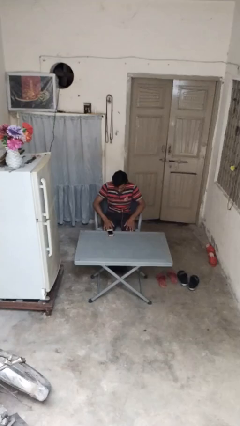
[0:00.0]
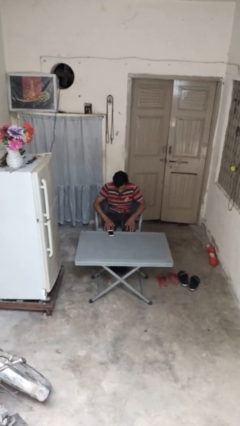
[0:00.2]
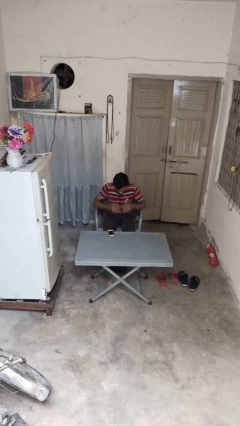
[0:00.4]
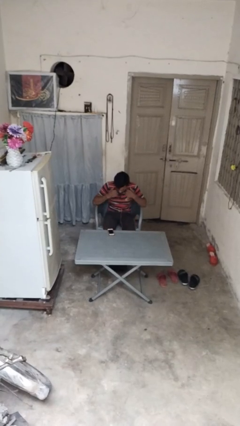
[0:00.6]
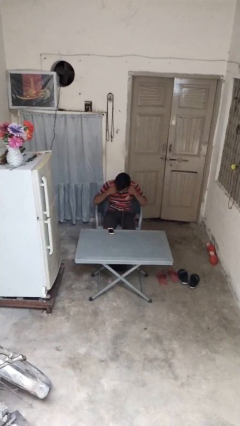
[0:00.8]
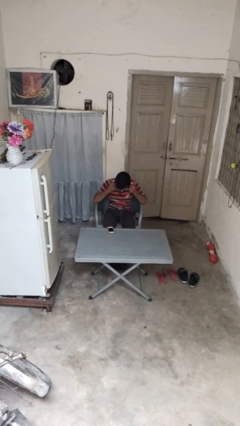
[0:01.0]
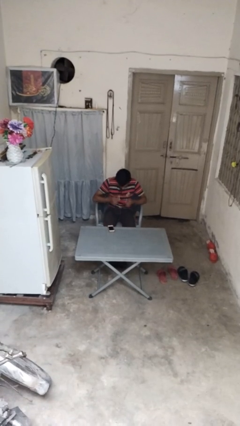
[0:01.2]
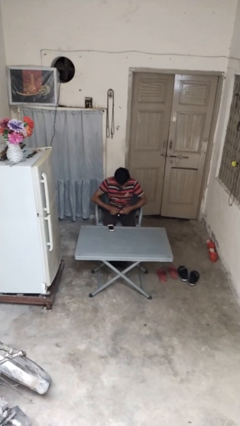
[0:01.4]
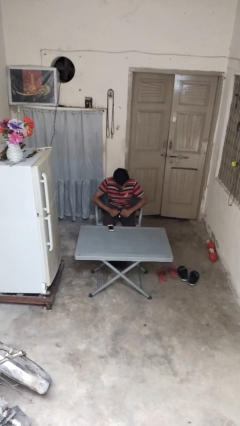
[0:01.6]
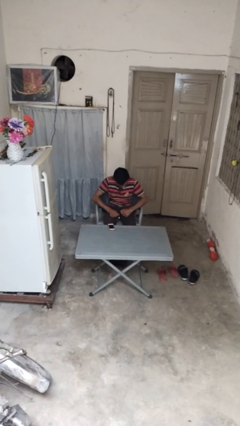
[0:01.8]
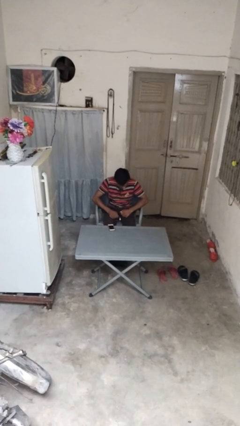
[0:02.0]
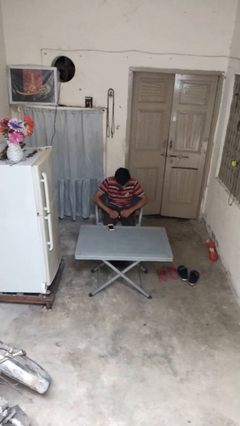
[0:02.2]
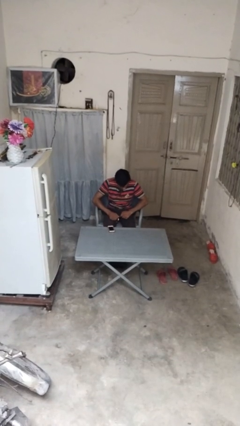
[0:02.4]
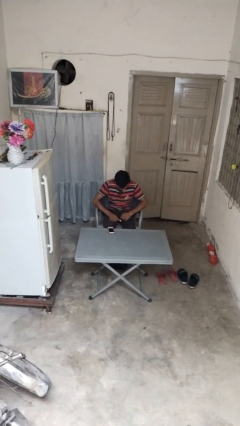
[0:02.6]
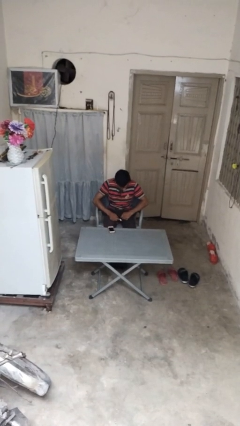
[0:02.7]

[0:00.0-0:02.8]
person takes off headphones

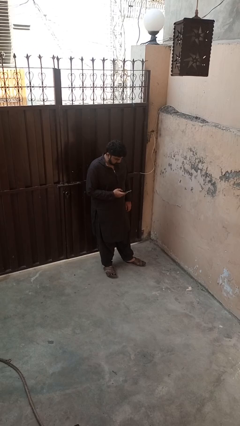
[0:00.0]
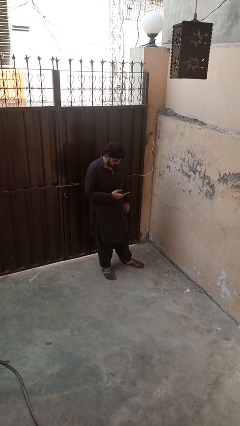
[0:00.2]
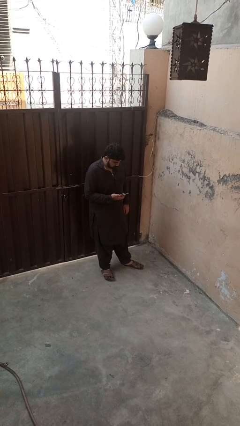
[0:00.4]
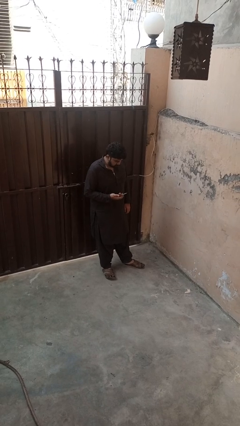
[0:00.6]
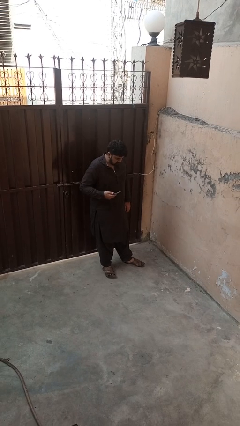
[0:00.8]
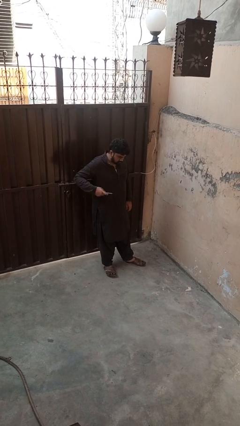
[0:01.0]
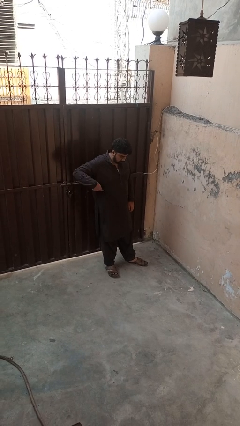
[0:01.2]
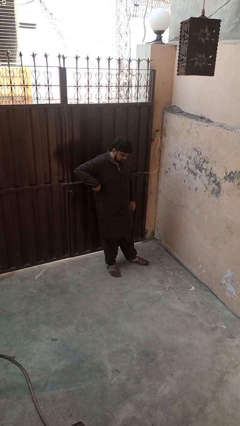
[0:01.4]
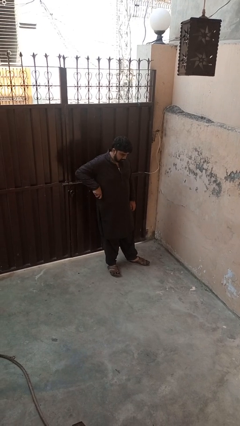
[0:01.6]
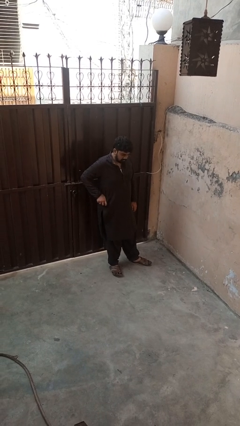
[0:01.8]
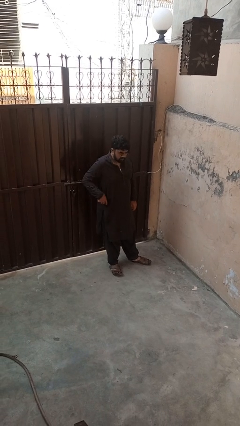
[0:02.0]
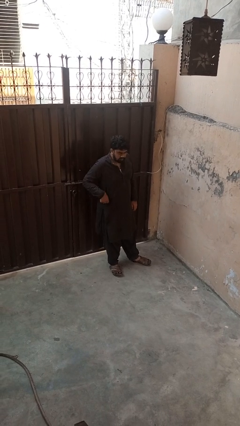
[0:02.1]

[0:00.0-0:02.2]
person puts phone into pocket

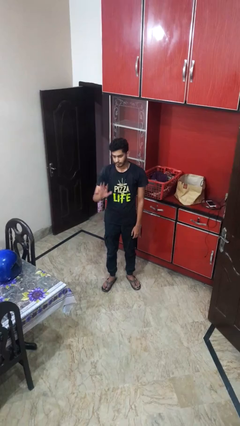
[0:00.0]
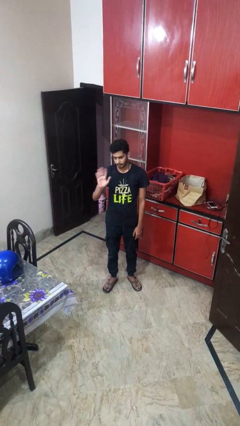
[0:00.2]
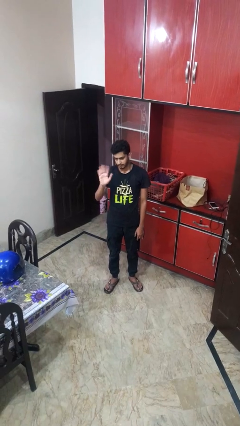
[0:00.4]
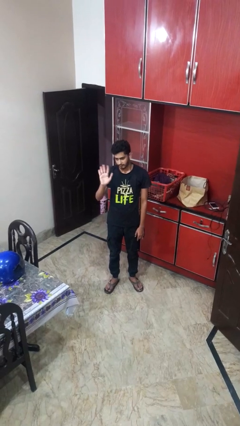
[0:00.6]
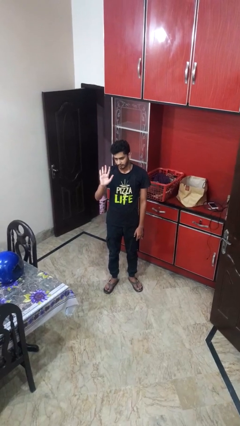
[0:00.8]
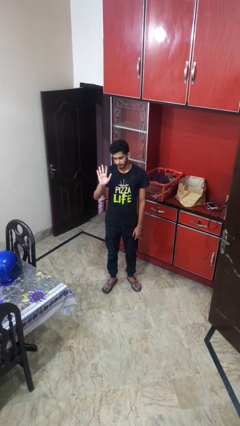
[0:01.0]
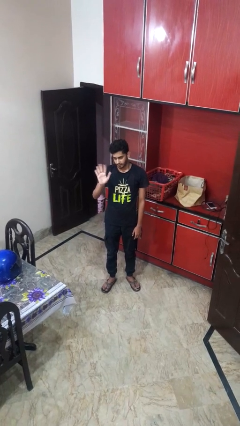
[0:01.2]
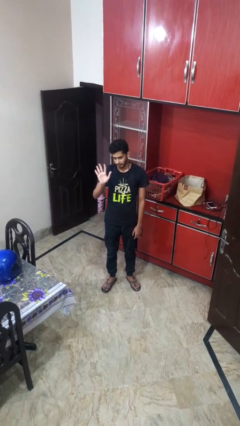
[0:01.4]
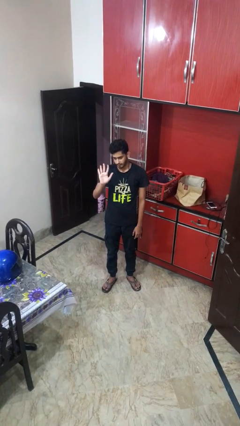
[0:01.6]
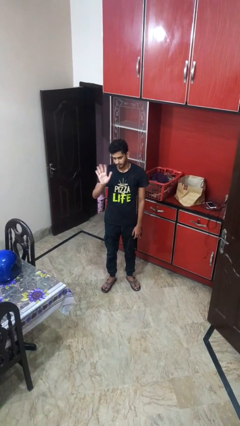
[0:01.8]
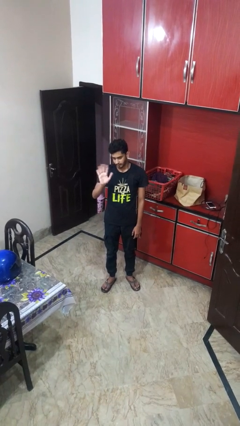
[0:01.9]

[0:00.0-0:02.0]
person waves at person

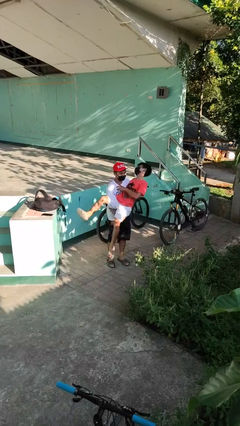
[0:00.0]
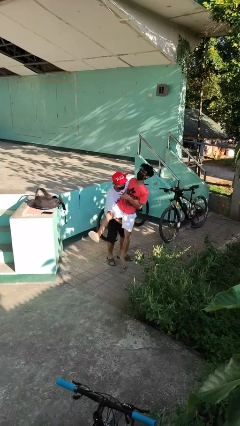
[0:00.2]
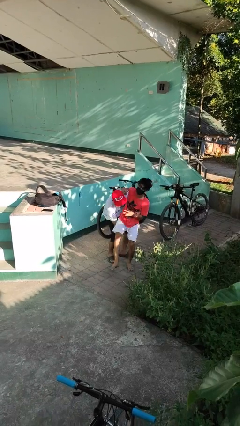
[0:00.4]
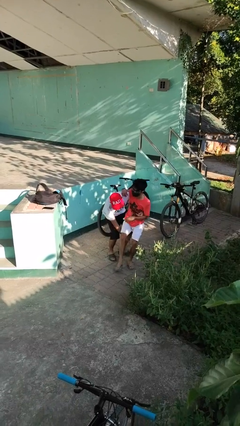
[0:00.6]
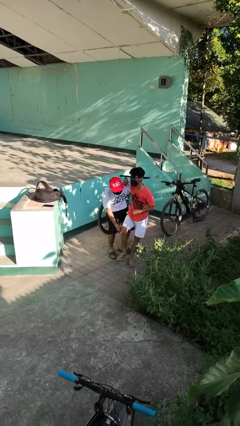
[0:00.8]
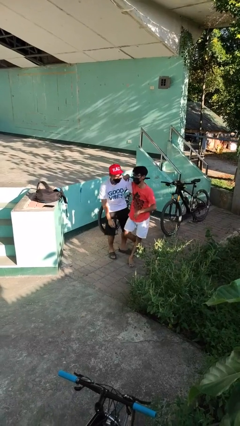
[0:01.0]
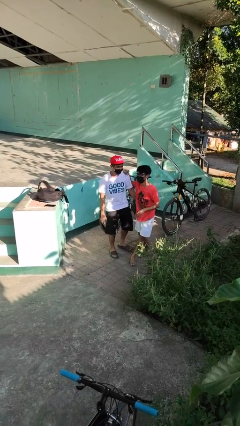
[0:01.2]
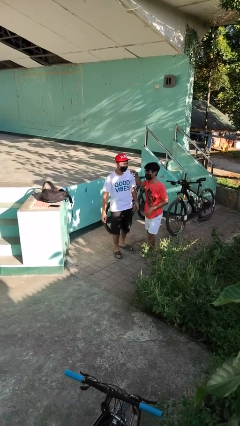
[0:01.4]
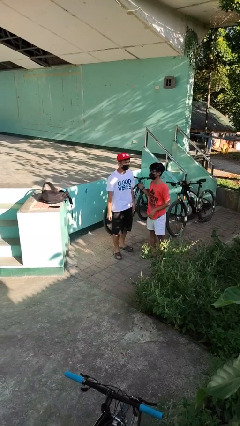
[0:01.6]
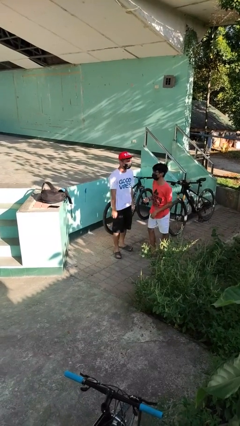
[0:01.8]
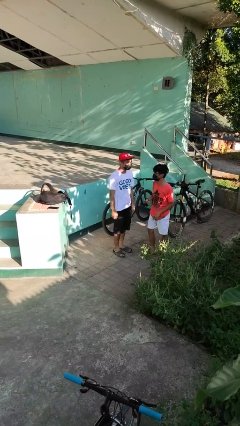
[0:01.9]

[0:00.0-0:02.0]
person puts down person

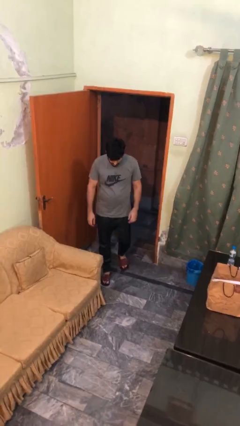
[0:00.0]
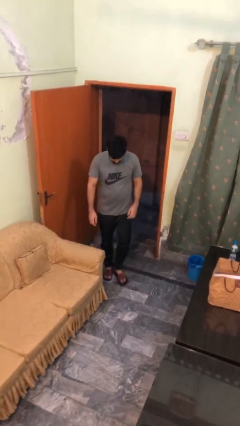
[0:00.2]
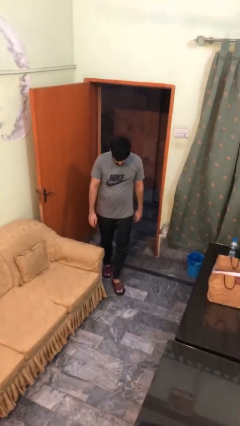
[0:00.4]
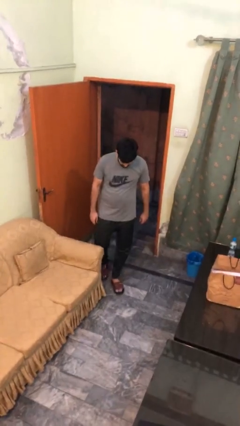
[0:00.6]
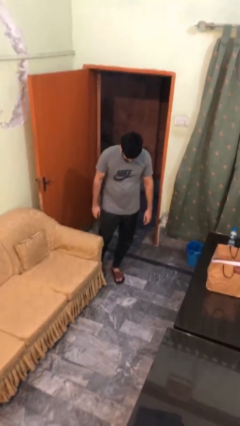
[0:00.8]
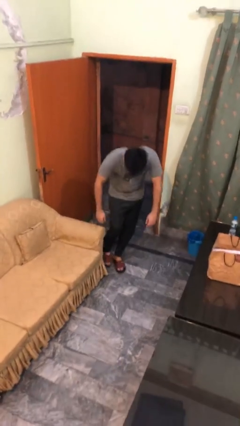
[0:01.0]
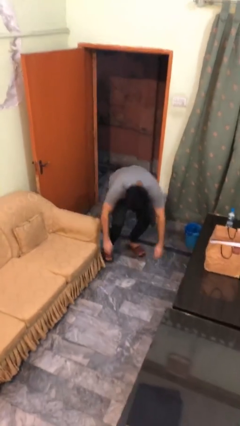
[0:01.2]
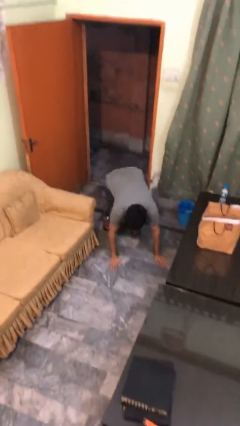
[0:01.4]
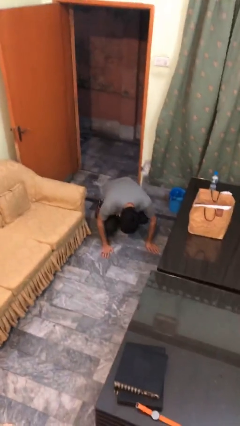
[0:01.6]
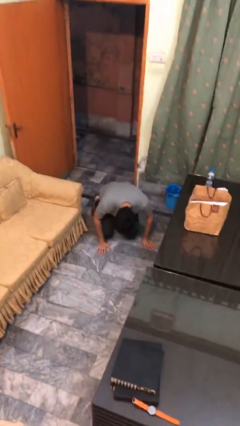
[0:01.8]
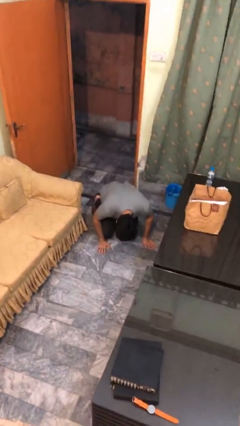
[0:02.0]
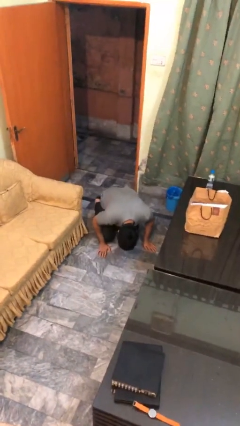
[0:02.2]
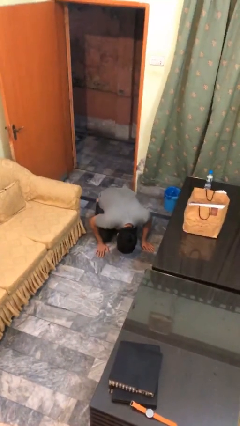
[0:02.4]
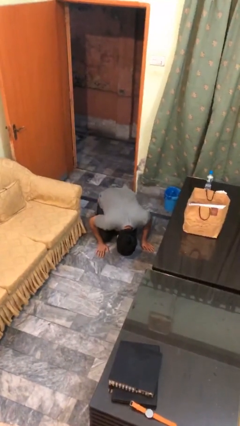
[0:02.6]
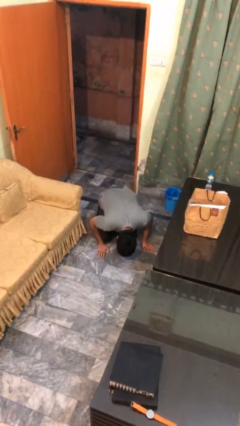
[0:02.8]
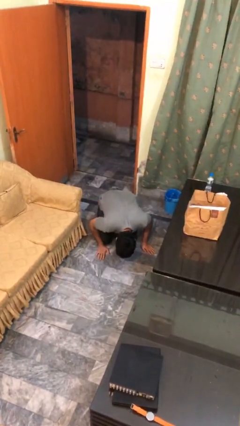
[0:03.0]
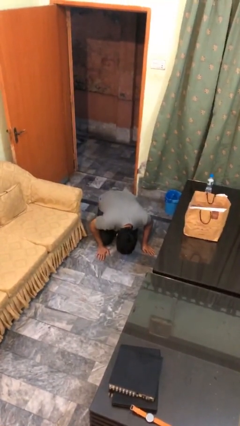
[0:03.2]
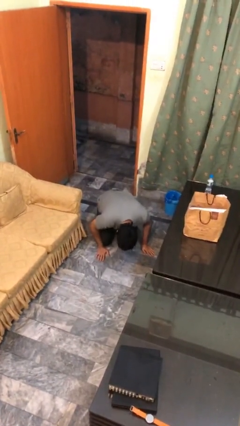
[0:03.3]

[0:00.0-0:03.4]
person trips on object on floor

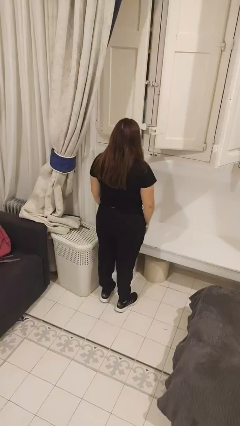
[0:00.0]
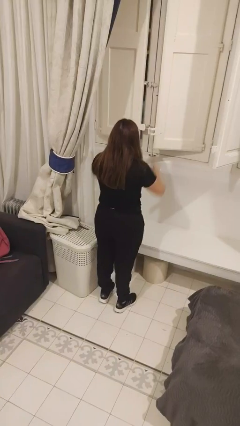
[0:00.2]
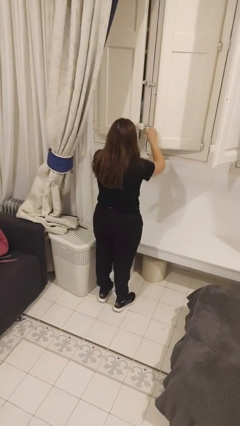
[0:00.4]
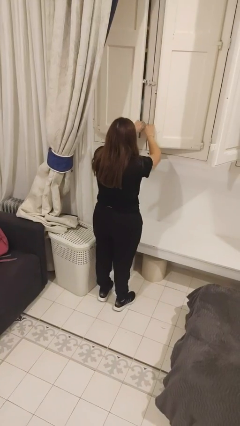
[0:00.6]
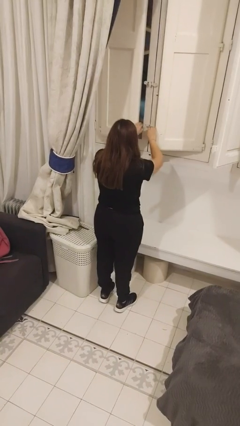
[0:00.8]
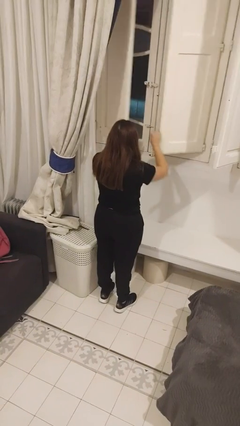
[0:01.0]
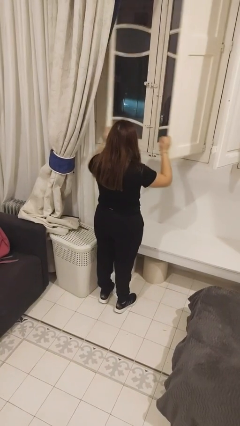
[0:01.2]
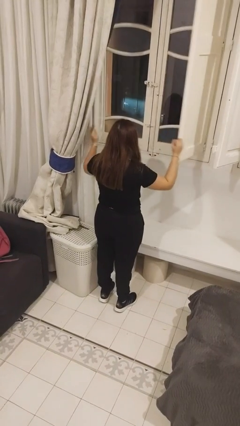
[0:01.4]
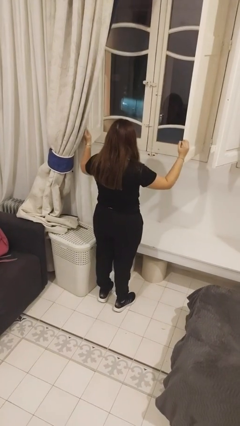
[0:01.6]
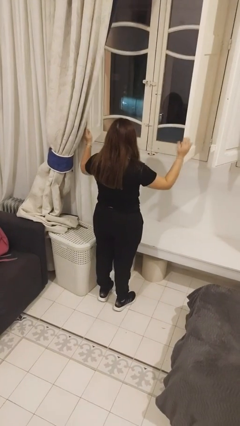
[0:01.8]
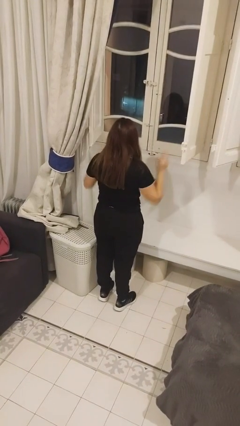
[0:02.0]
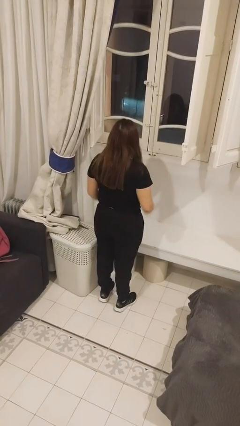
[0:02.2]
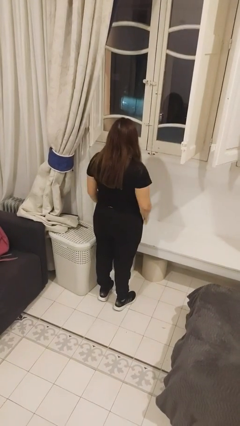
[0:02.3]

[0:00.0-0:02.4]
person opens home window

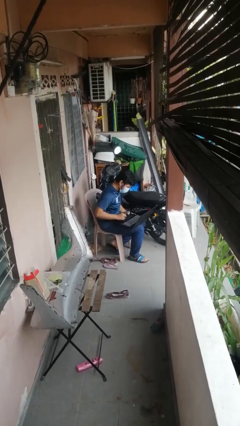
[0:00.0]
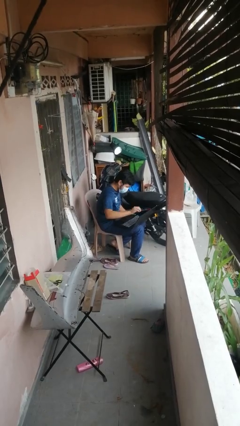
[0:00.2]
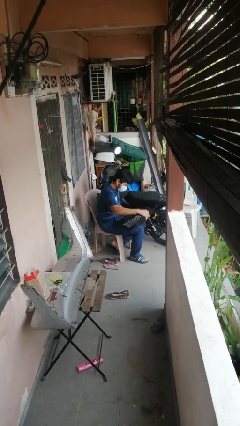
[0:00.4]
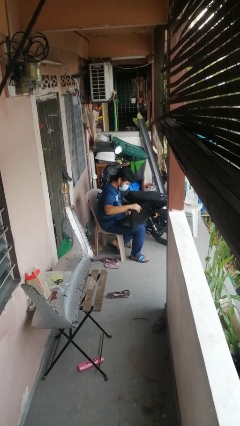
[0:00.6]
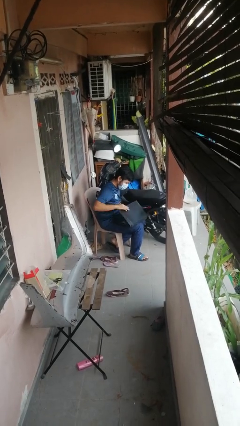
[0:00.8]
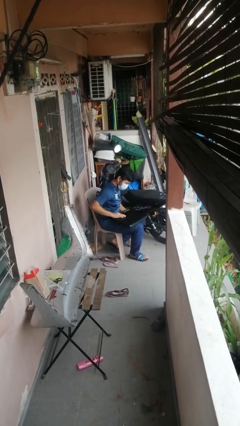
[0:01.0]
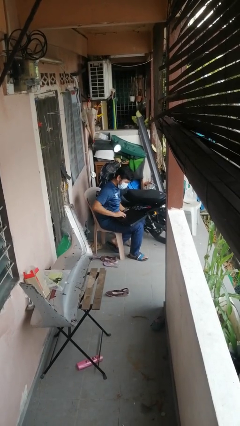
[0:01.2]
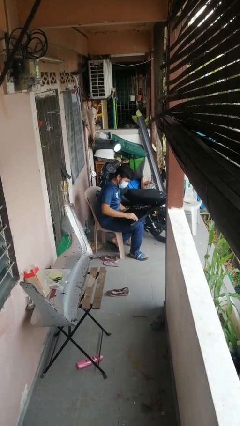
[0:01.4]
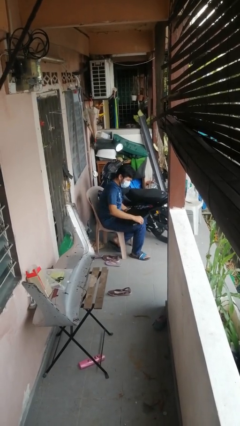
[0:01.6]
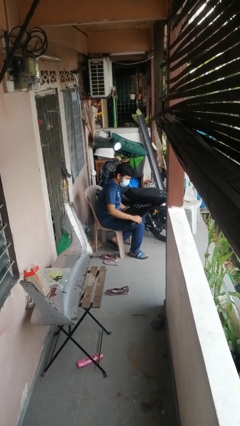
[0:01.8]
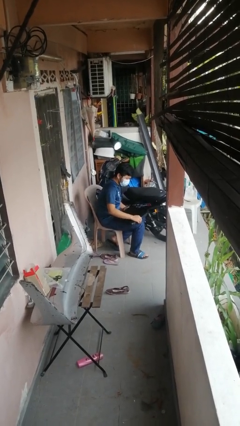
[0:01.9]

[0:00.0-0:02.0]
person closes laptop
